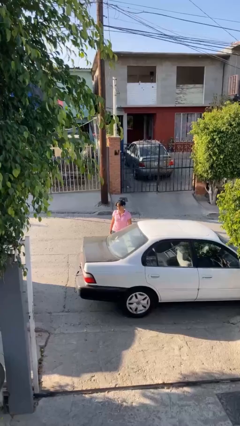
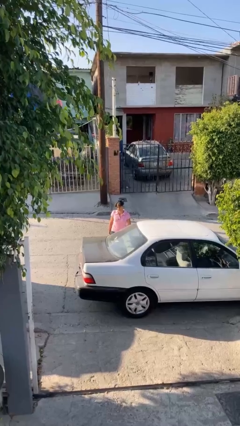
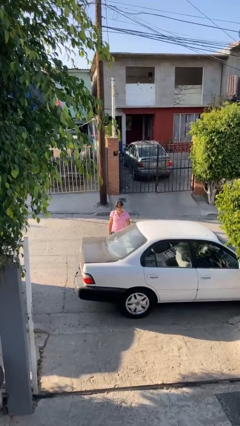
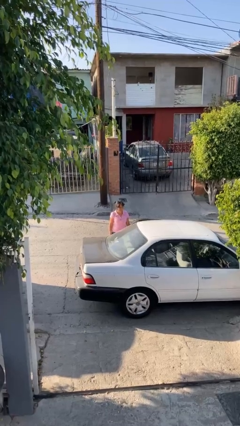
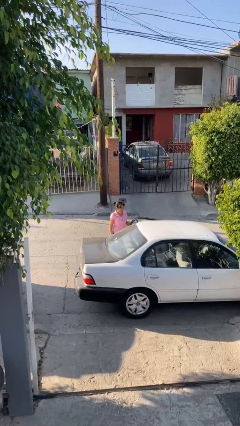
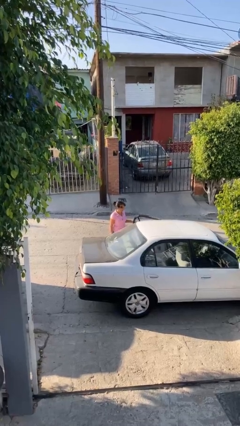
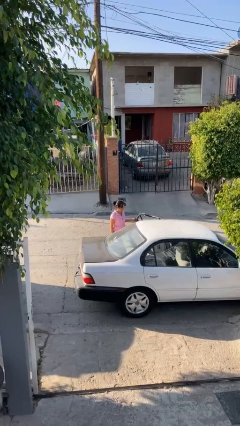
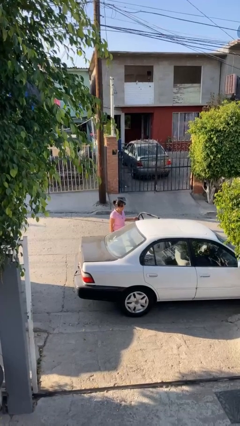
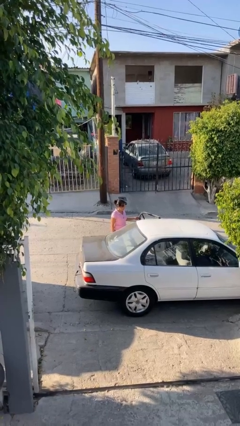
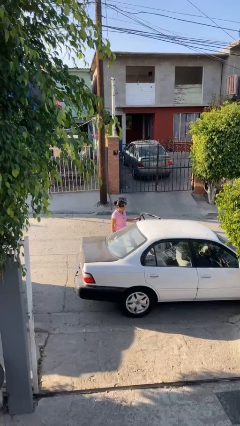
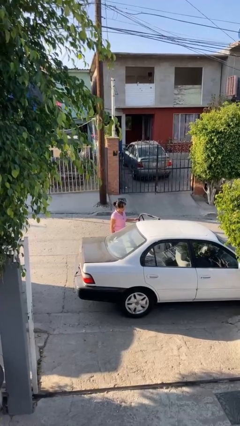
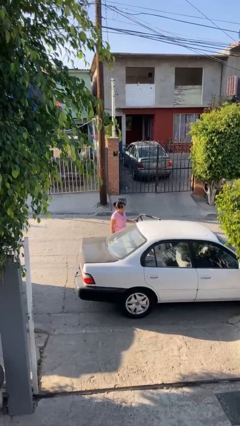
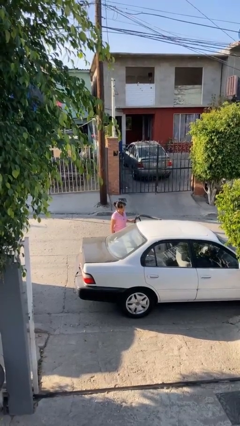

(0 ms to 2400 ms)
person opens car door

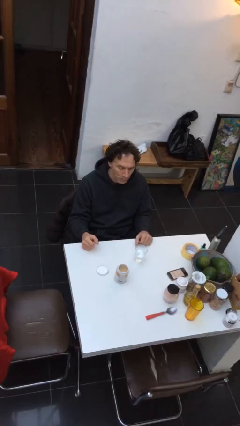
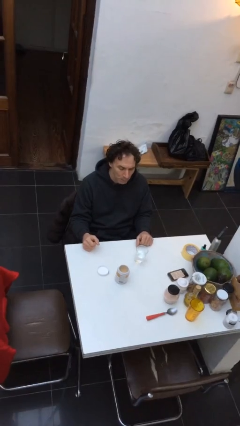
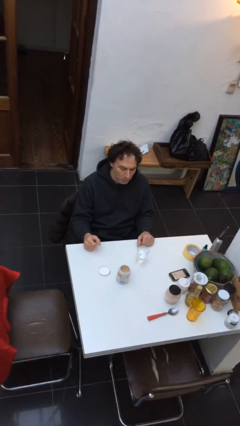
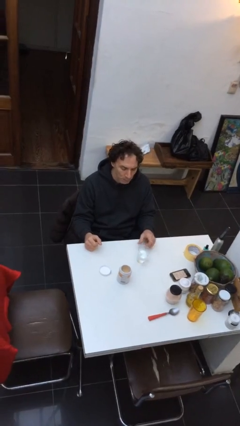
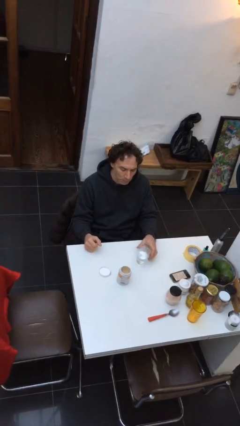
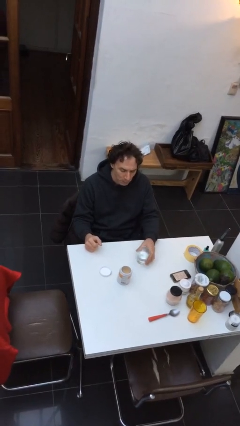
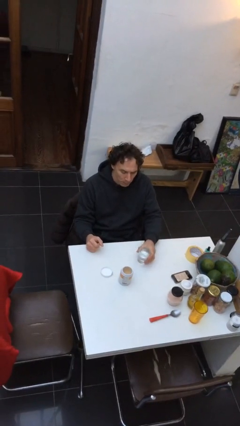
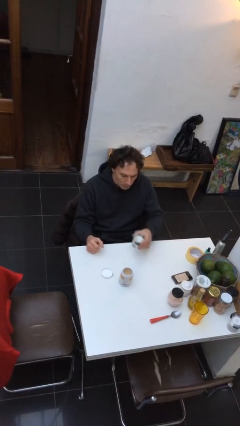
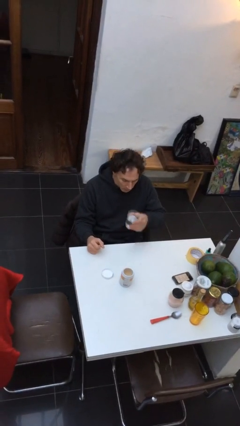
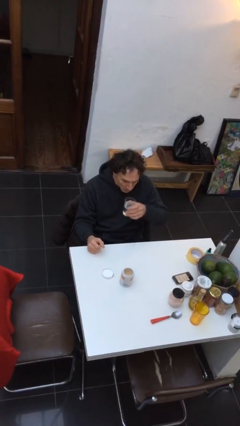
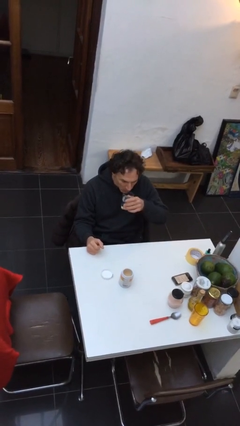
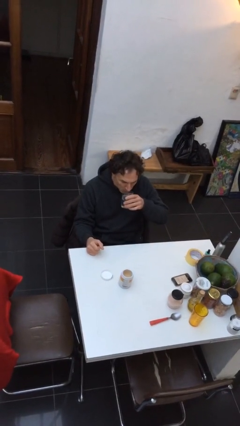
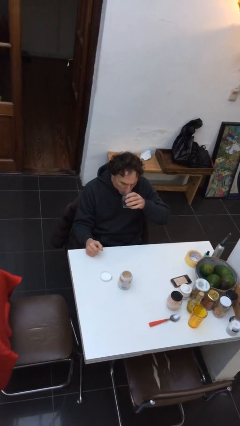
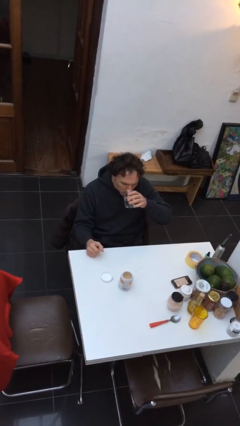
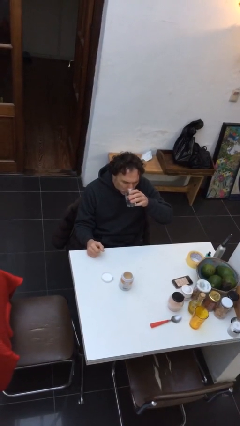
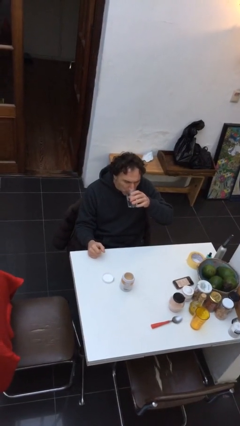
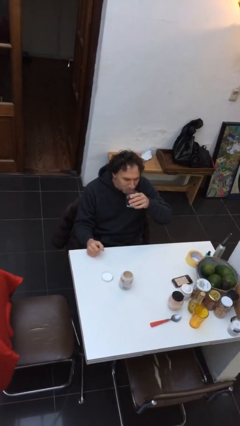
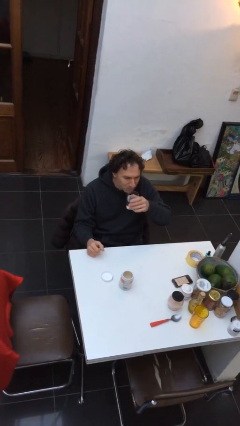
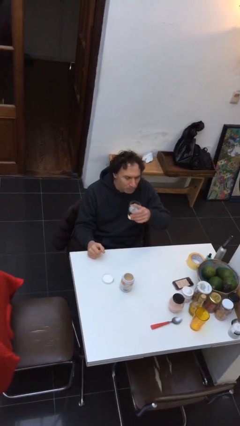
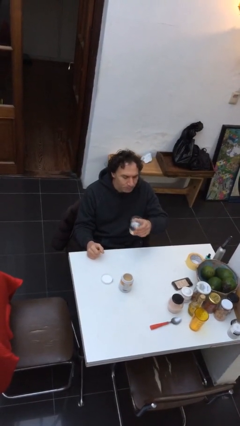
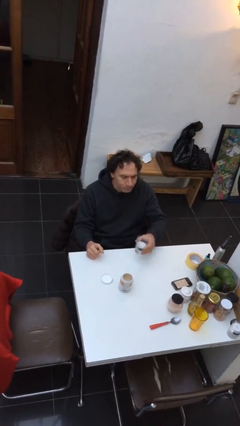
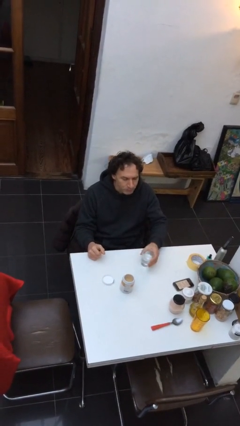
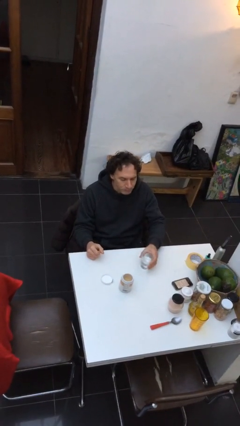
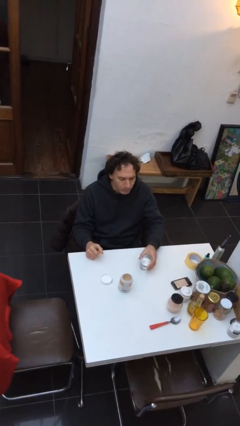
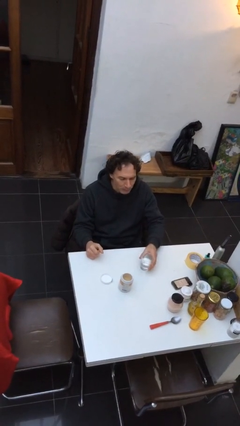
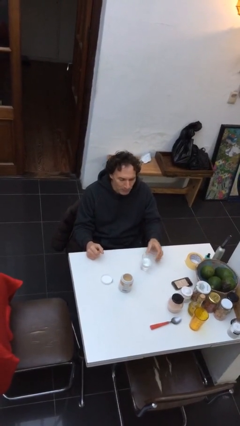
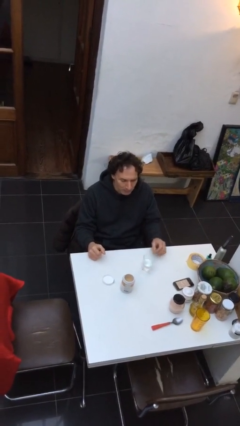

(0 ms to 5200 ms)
person drinks from cup

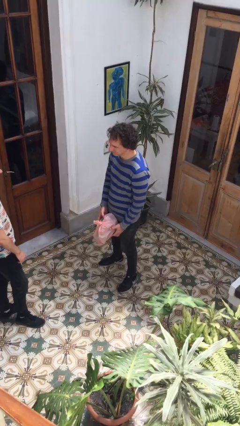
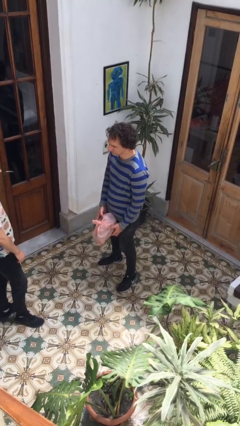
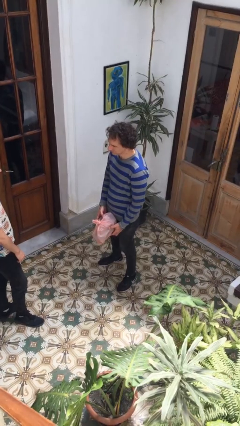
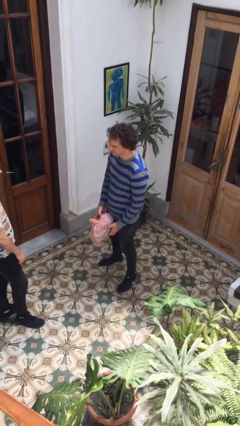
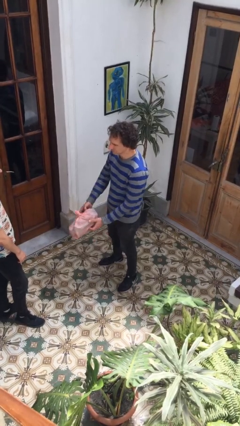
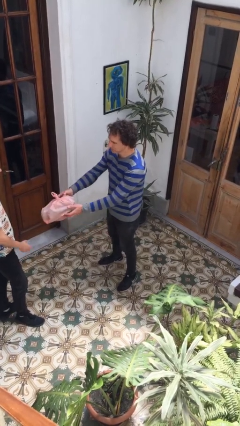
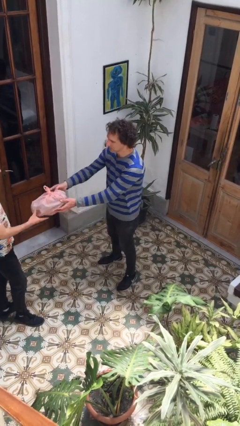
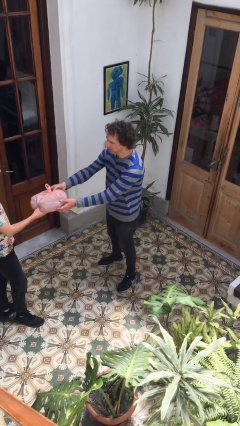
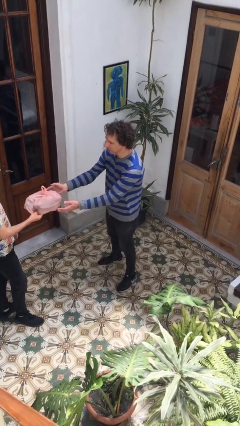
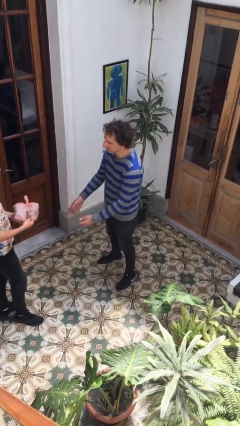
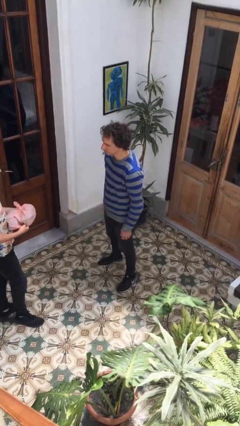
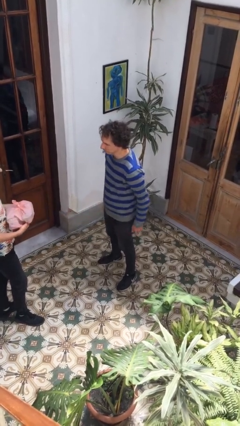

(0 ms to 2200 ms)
person transfers object to person

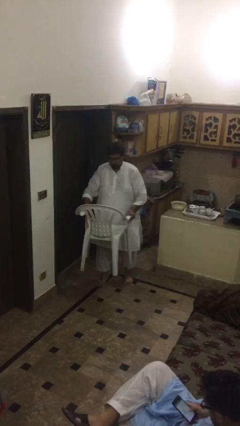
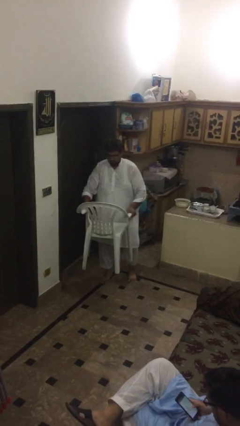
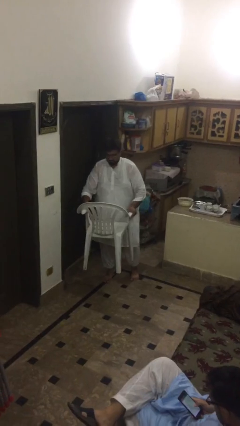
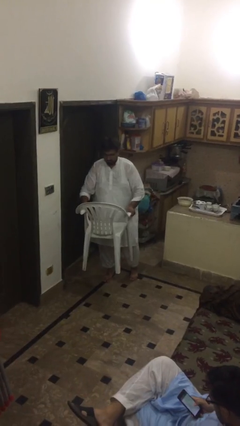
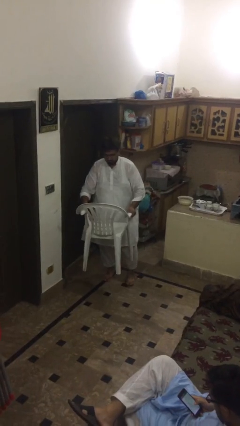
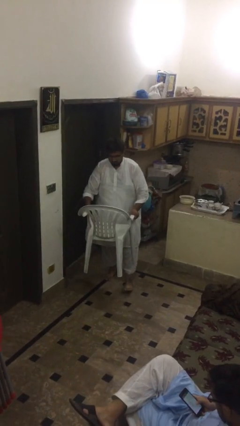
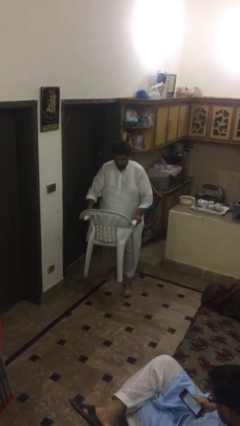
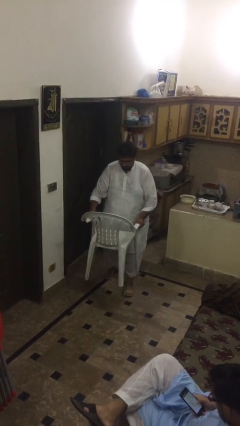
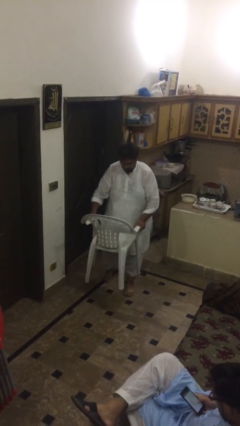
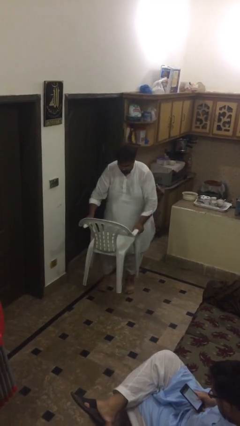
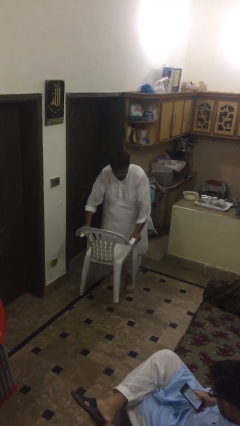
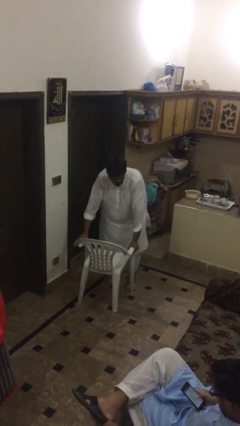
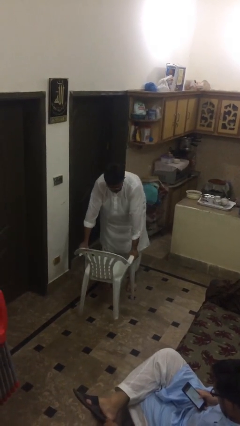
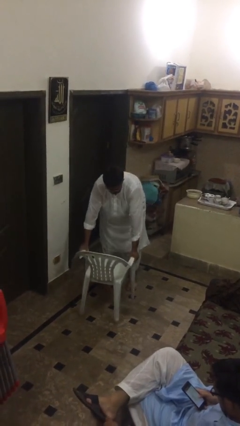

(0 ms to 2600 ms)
person puts down object on floor

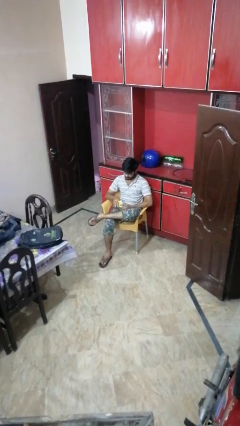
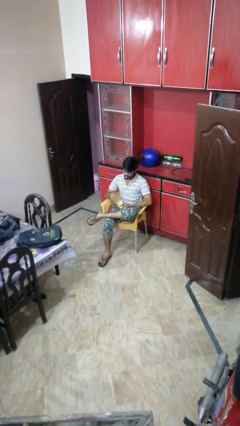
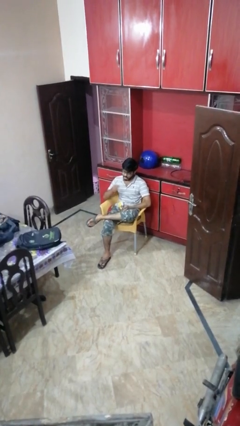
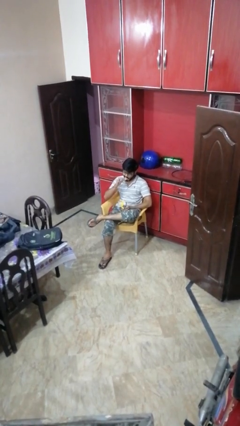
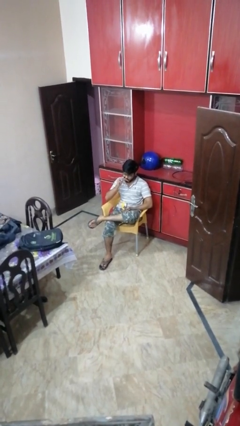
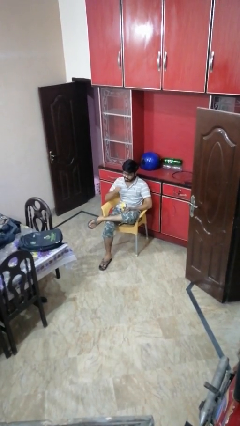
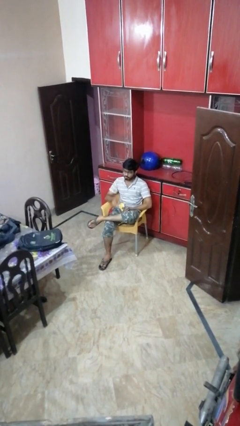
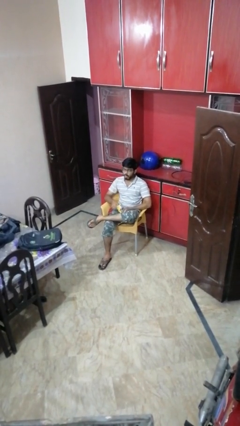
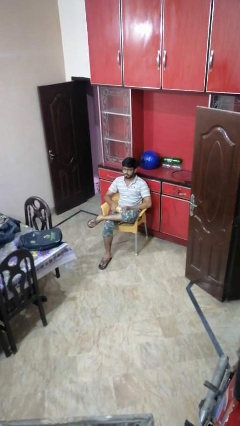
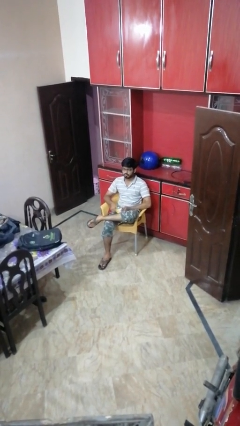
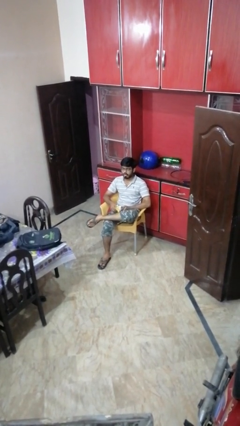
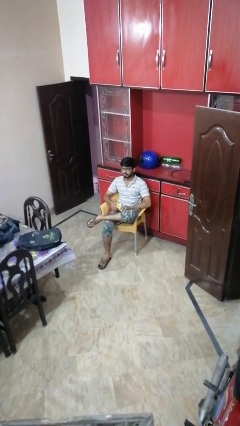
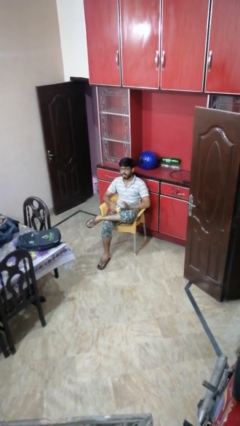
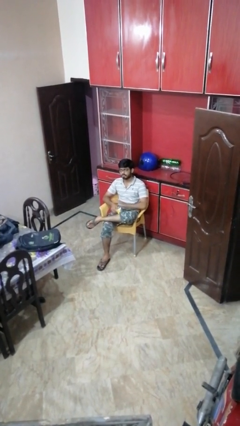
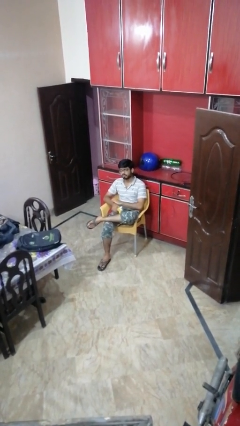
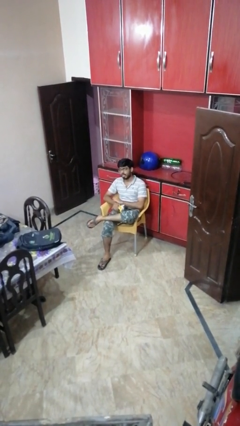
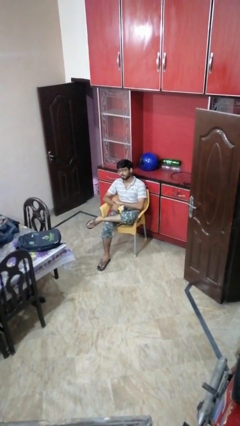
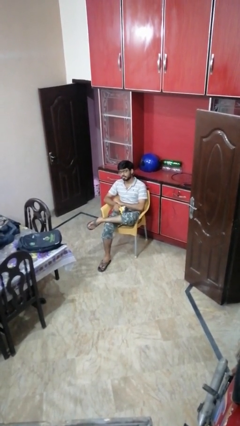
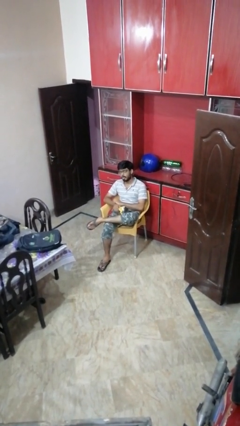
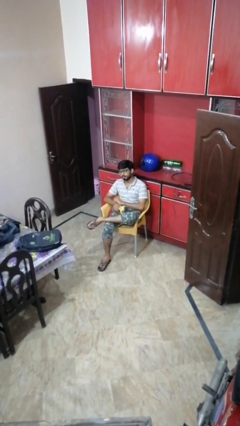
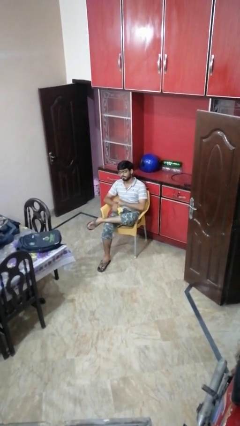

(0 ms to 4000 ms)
person eats snack from bag

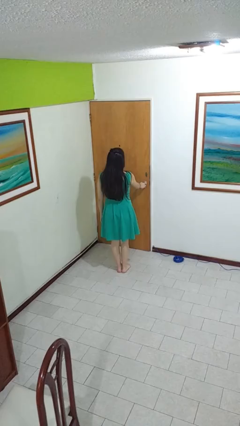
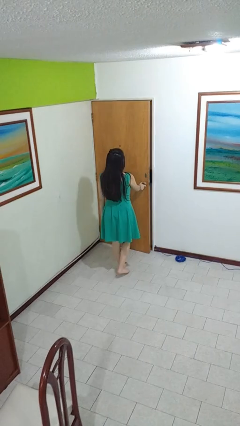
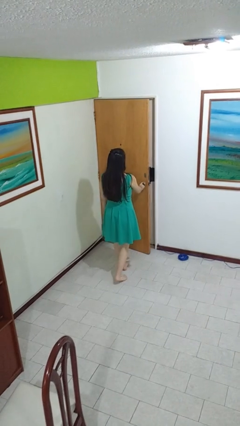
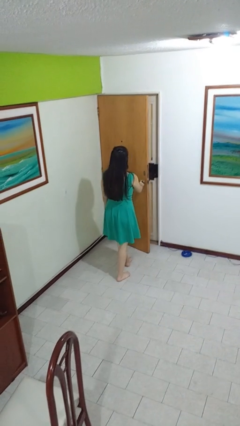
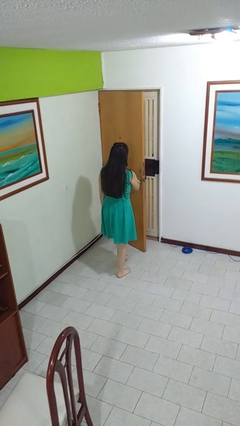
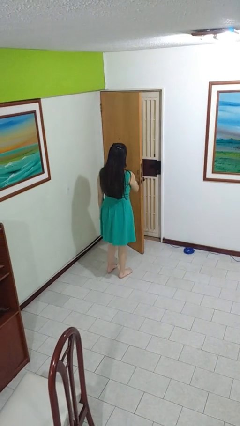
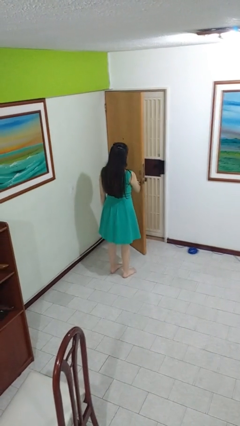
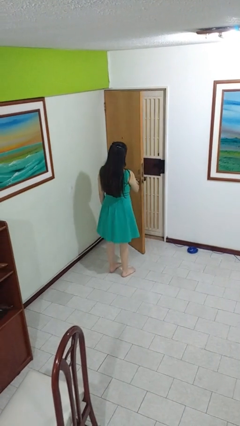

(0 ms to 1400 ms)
person opens facility door
